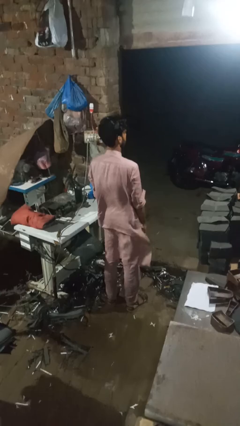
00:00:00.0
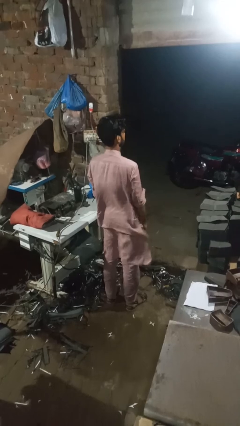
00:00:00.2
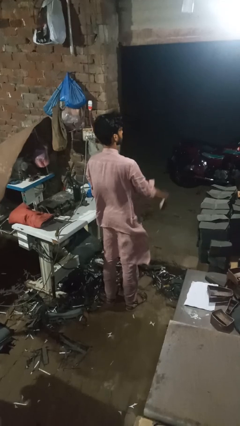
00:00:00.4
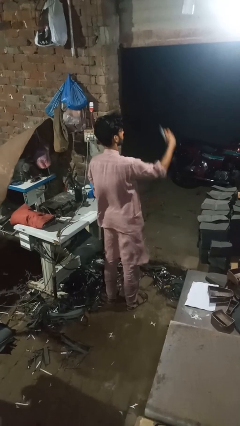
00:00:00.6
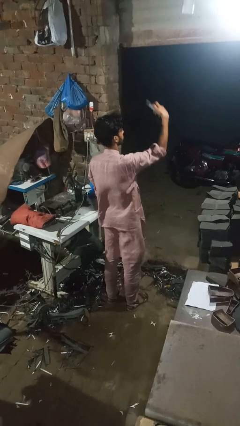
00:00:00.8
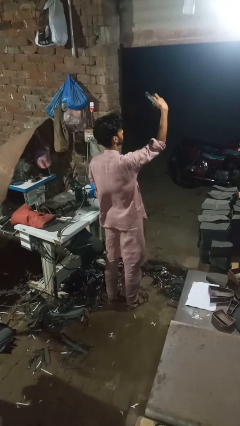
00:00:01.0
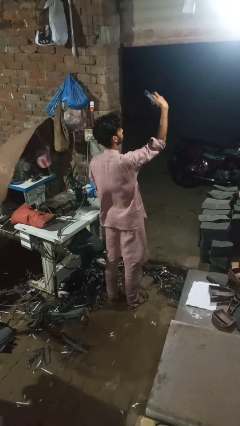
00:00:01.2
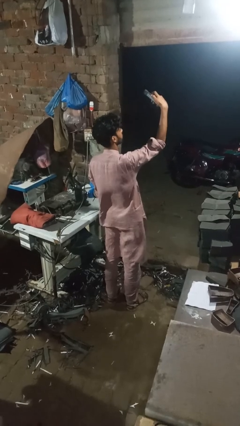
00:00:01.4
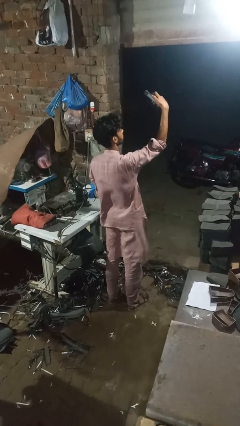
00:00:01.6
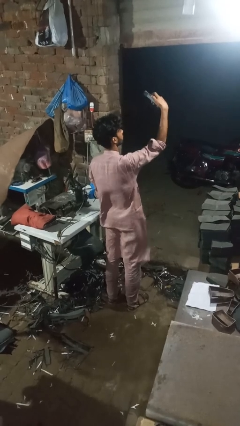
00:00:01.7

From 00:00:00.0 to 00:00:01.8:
person takes selfie

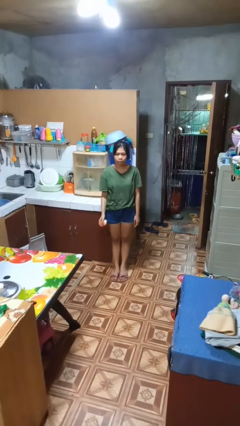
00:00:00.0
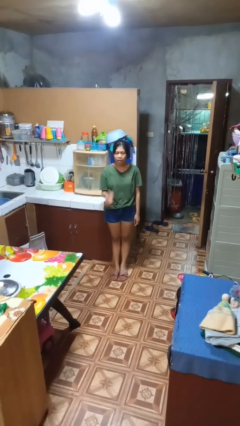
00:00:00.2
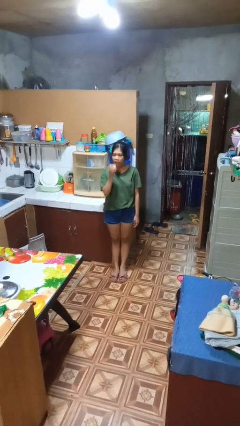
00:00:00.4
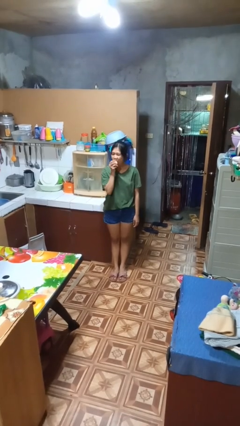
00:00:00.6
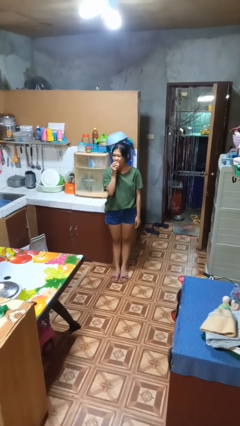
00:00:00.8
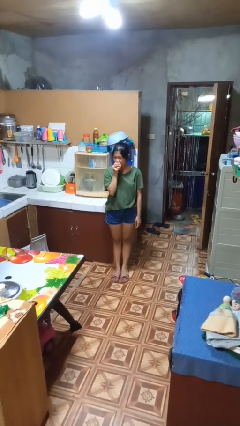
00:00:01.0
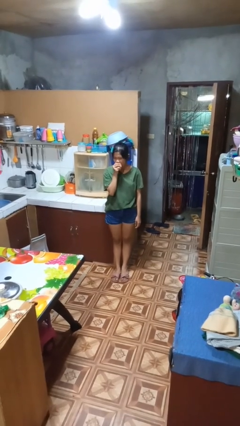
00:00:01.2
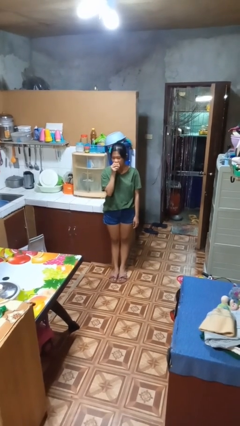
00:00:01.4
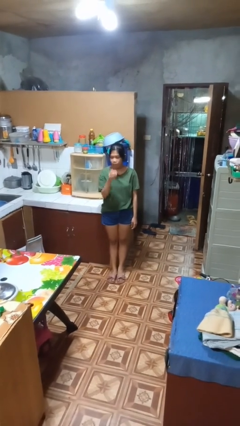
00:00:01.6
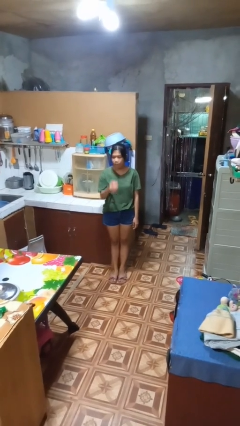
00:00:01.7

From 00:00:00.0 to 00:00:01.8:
person eats apple

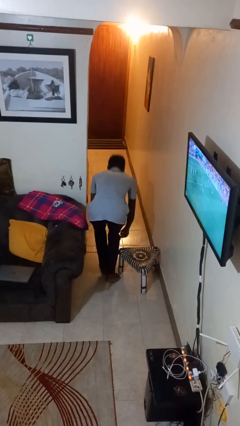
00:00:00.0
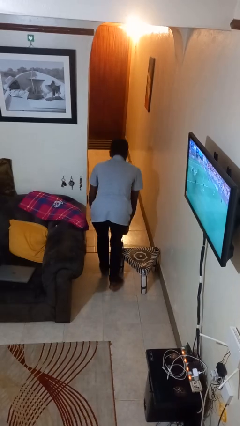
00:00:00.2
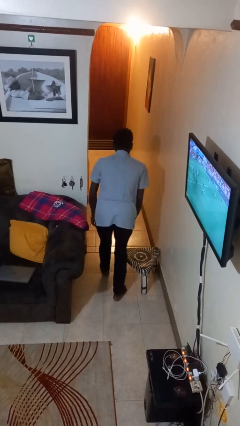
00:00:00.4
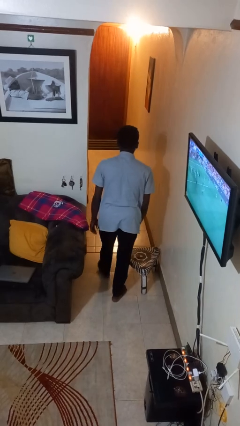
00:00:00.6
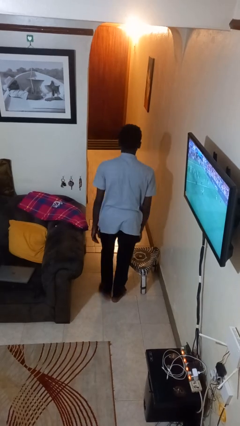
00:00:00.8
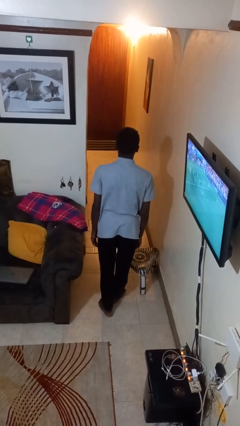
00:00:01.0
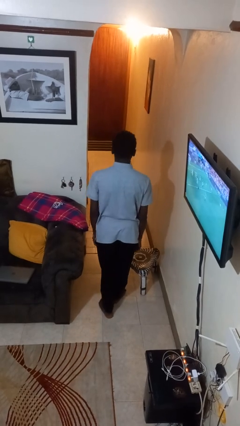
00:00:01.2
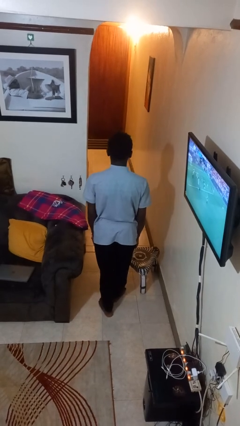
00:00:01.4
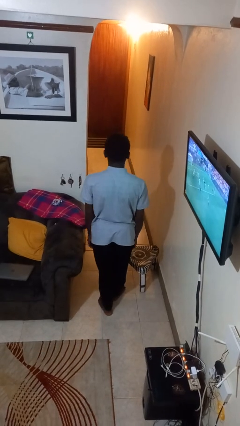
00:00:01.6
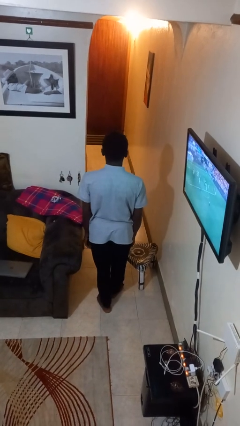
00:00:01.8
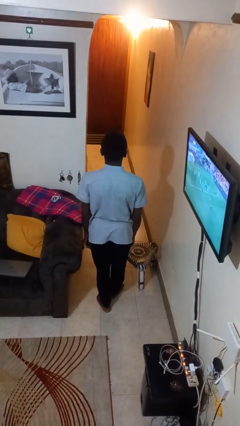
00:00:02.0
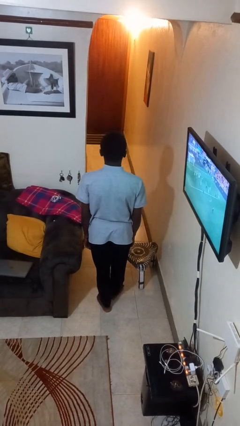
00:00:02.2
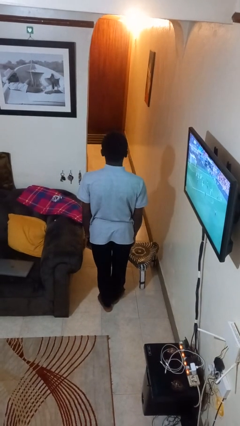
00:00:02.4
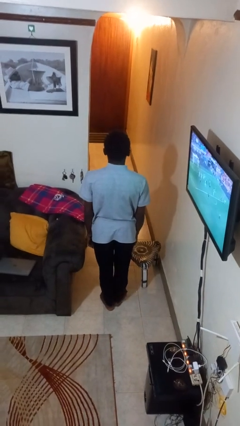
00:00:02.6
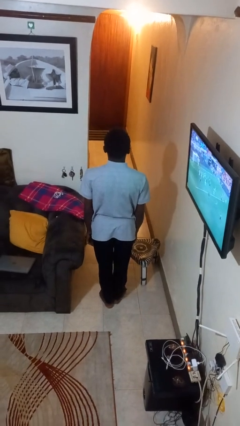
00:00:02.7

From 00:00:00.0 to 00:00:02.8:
person stands up from floor

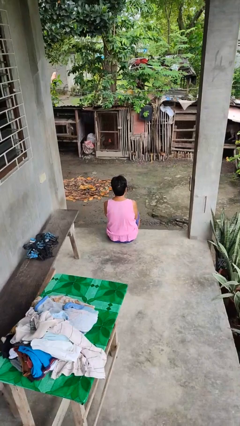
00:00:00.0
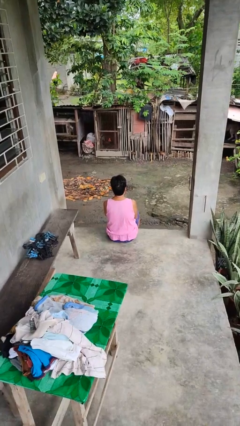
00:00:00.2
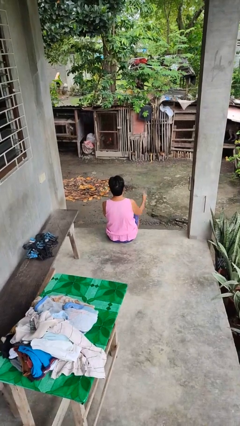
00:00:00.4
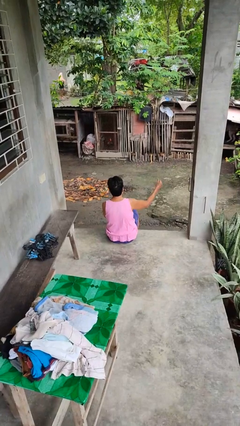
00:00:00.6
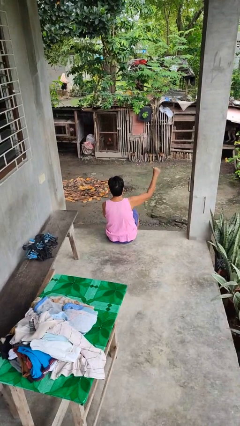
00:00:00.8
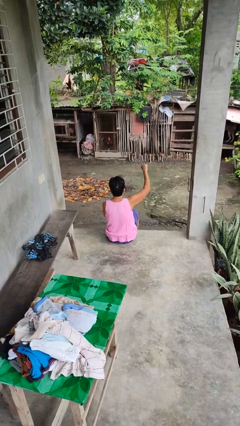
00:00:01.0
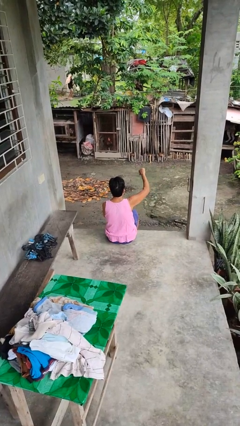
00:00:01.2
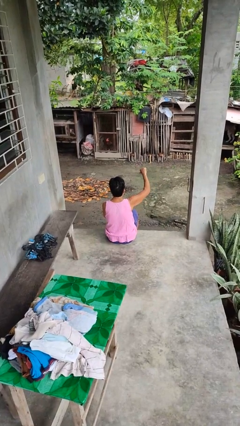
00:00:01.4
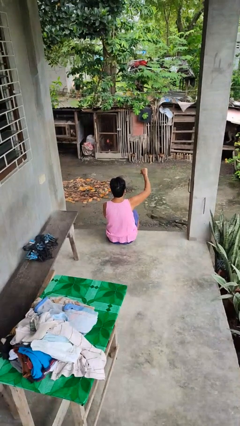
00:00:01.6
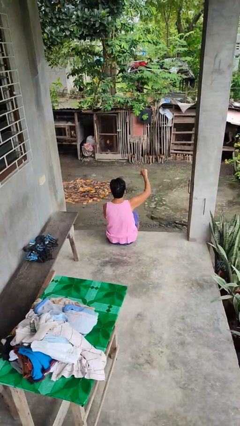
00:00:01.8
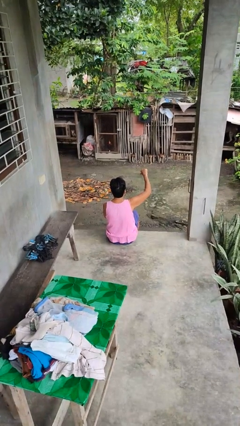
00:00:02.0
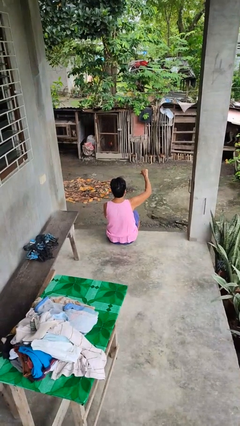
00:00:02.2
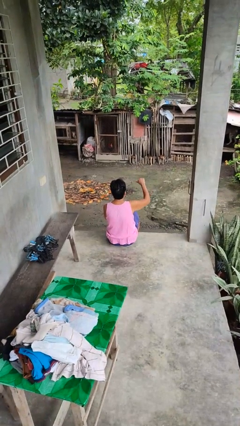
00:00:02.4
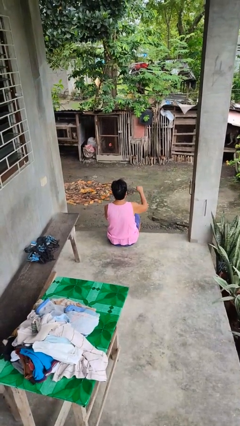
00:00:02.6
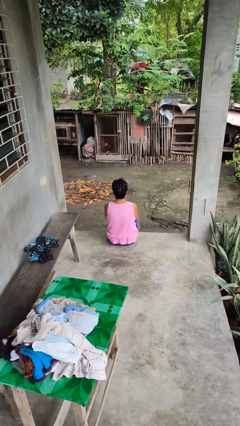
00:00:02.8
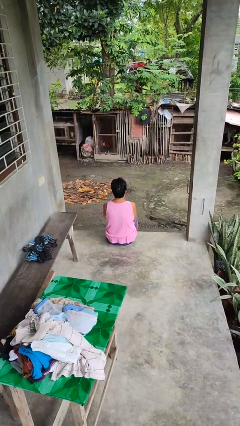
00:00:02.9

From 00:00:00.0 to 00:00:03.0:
person gestures thumbs down

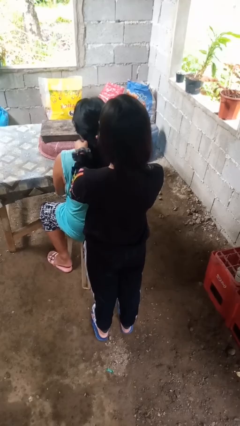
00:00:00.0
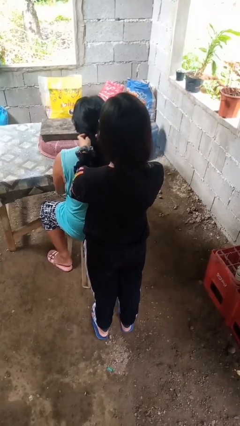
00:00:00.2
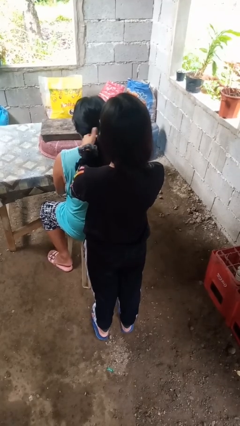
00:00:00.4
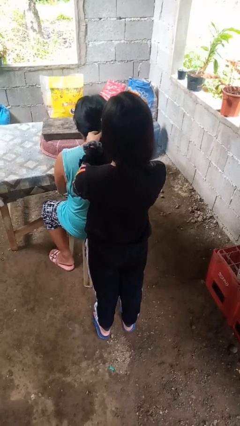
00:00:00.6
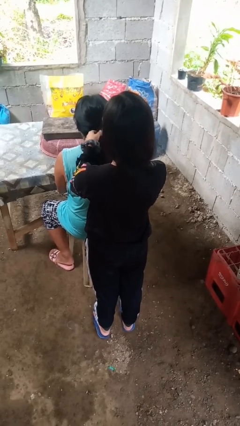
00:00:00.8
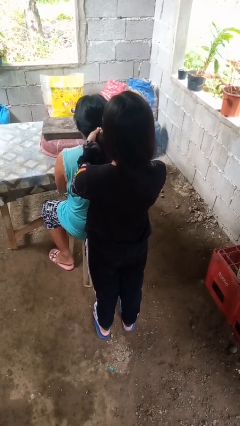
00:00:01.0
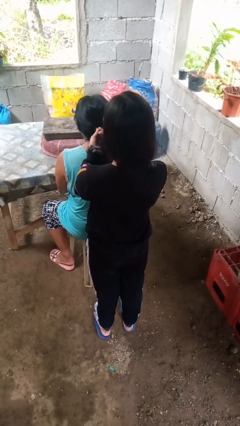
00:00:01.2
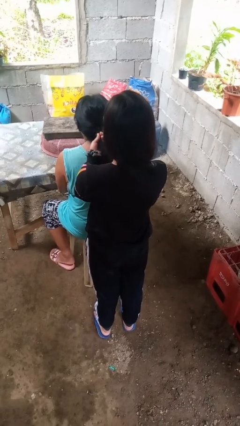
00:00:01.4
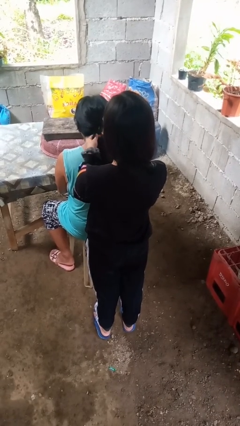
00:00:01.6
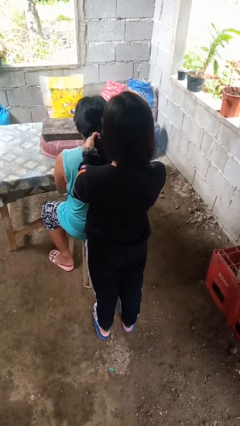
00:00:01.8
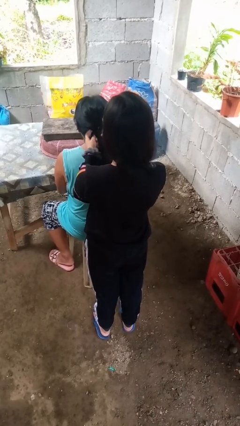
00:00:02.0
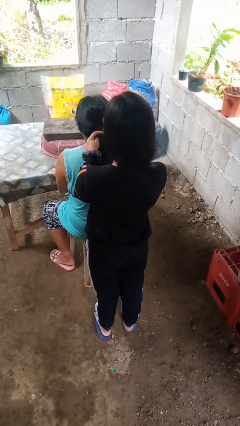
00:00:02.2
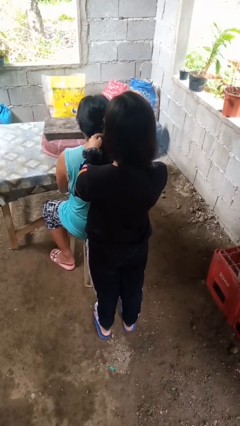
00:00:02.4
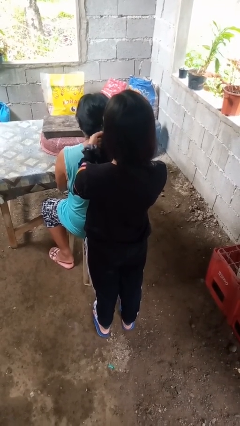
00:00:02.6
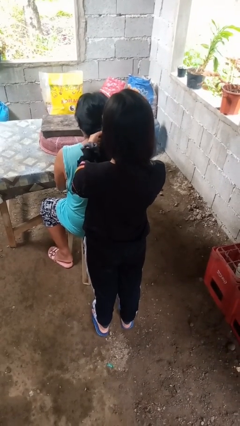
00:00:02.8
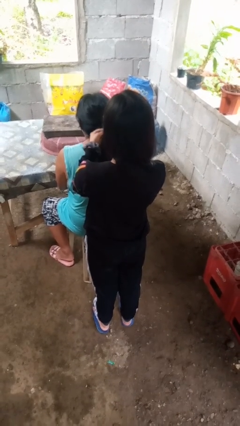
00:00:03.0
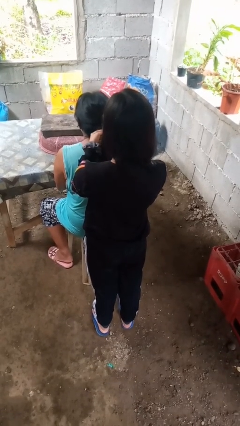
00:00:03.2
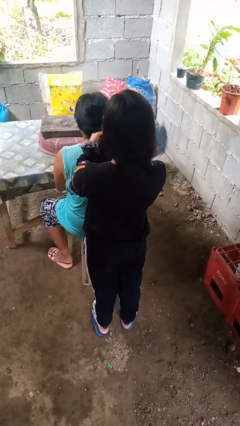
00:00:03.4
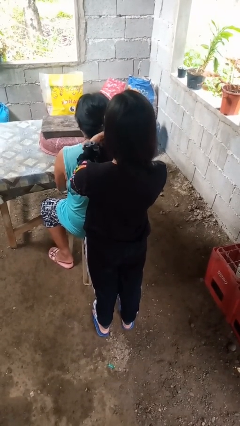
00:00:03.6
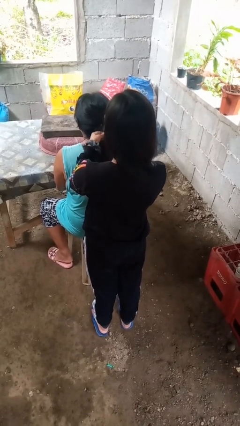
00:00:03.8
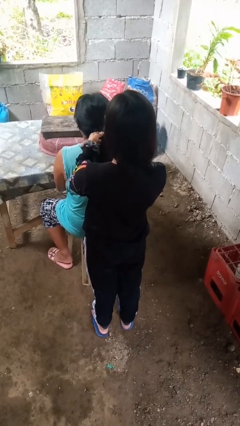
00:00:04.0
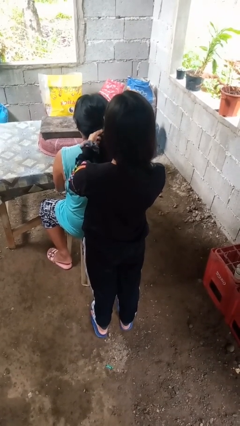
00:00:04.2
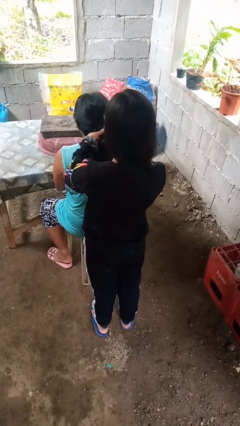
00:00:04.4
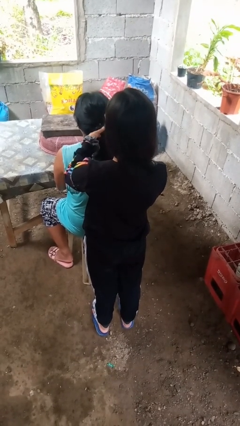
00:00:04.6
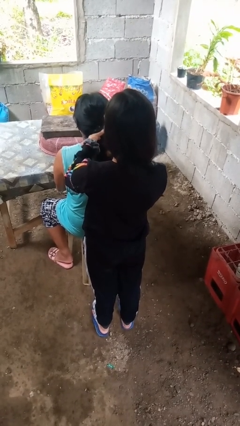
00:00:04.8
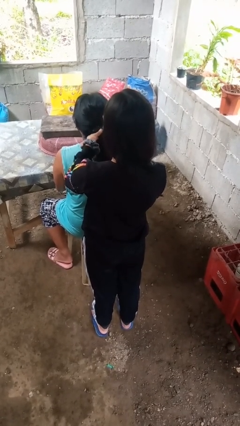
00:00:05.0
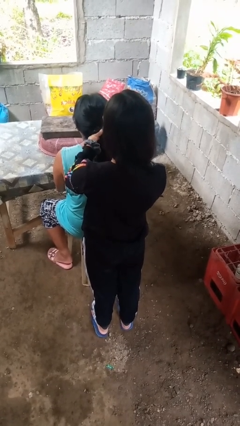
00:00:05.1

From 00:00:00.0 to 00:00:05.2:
person braids hair of person

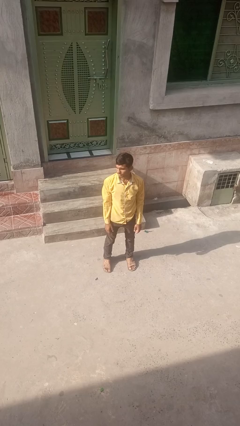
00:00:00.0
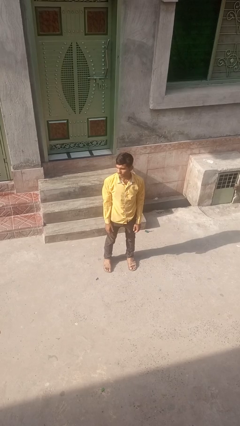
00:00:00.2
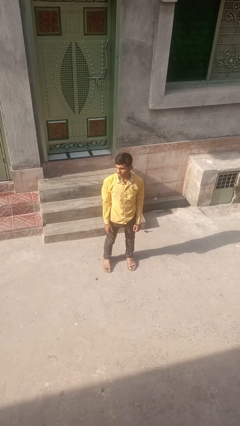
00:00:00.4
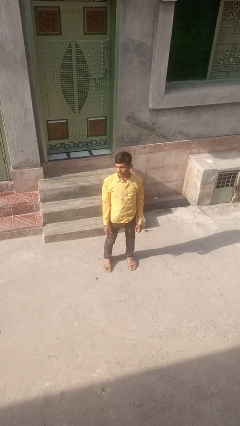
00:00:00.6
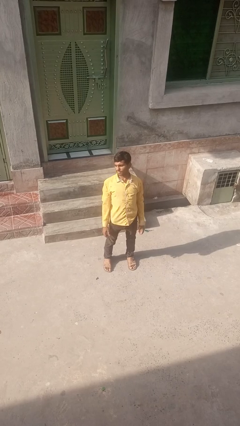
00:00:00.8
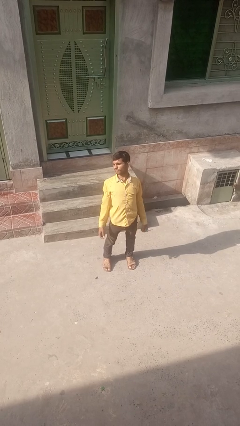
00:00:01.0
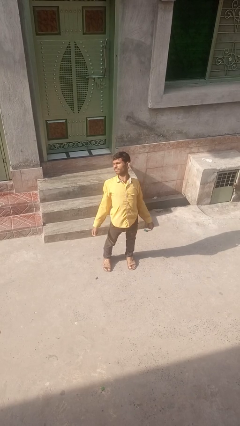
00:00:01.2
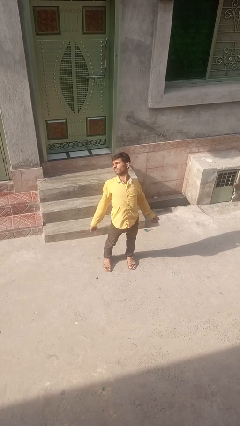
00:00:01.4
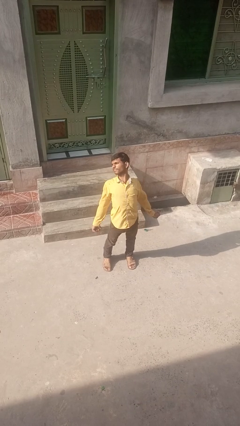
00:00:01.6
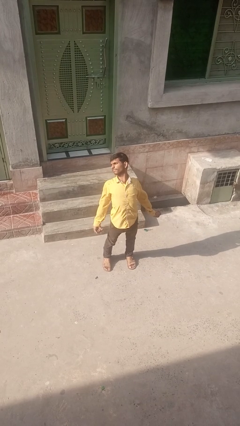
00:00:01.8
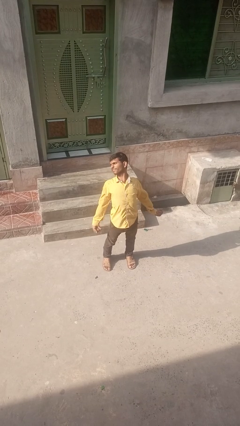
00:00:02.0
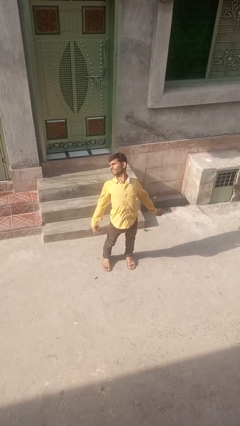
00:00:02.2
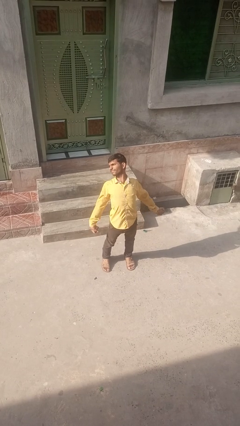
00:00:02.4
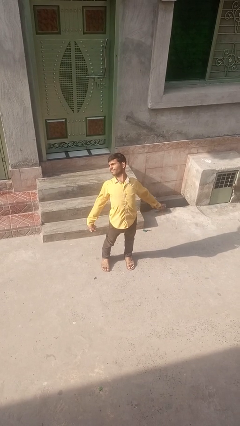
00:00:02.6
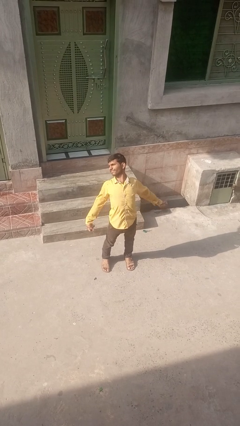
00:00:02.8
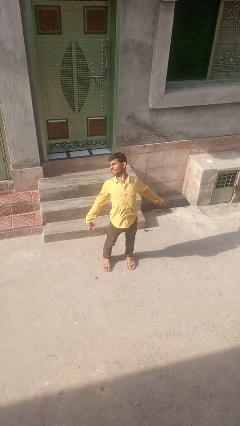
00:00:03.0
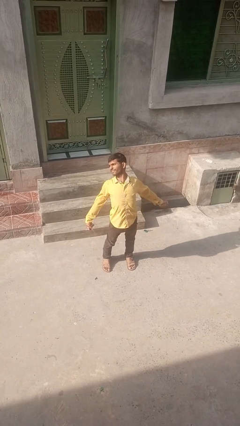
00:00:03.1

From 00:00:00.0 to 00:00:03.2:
person stretches back
